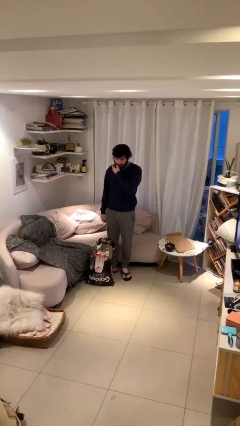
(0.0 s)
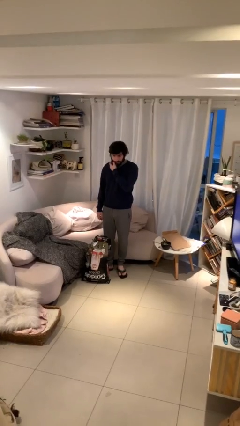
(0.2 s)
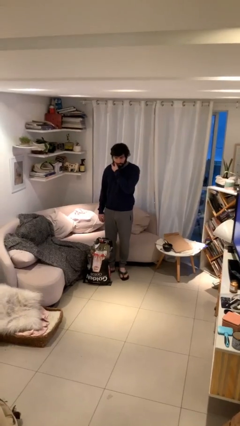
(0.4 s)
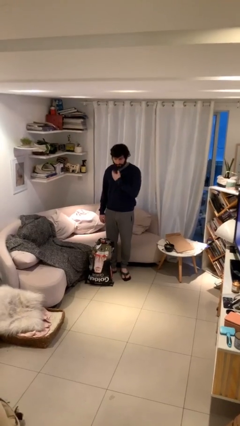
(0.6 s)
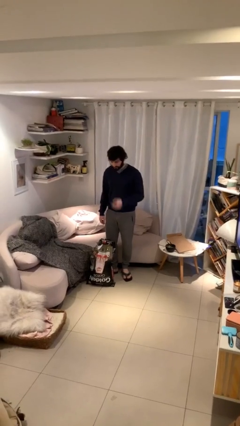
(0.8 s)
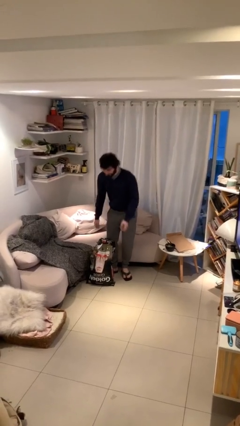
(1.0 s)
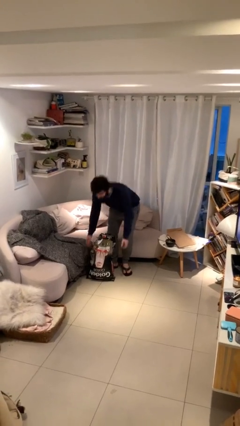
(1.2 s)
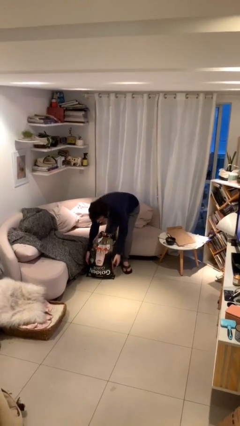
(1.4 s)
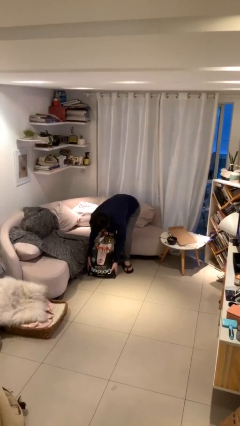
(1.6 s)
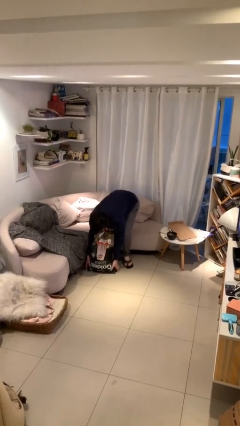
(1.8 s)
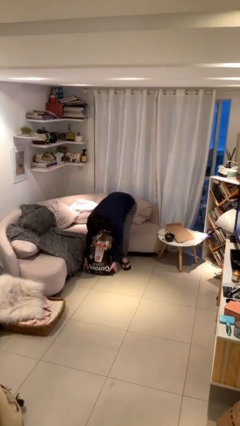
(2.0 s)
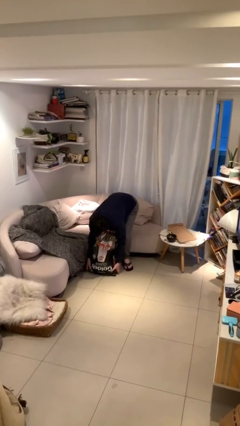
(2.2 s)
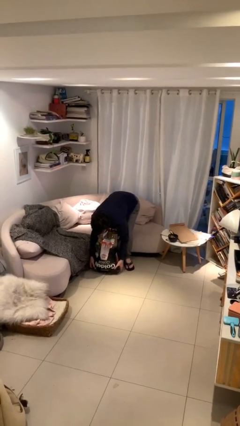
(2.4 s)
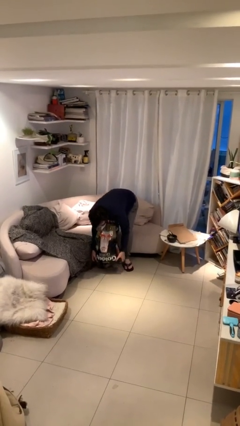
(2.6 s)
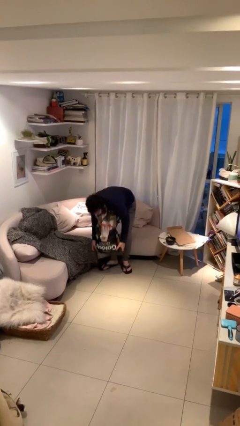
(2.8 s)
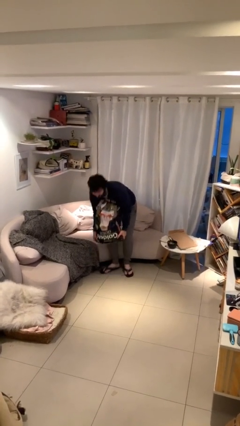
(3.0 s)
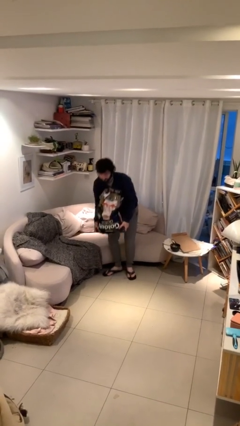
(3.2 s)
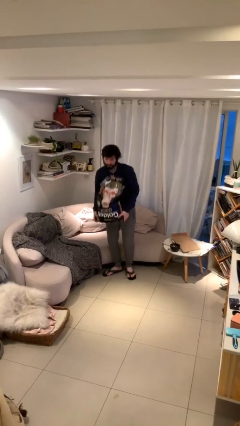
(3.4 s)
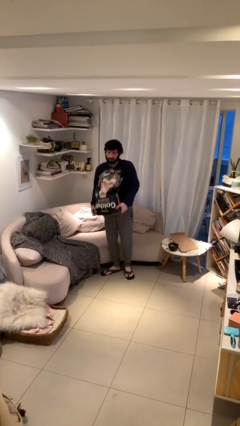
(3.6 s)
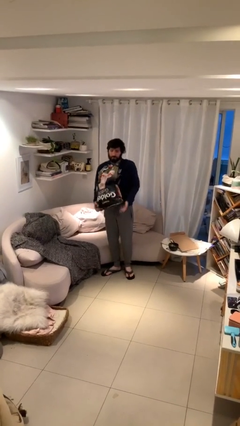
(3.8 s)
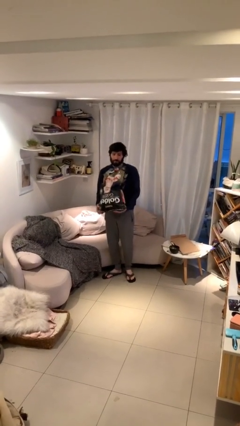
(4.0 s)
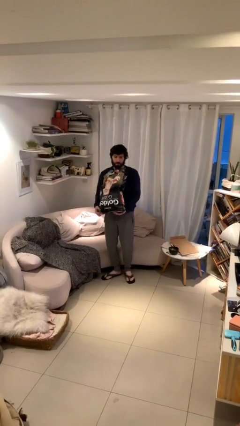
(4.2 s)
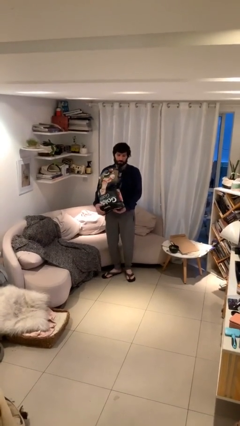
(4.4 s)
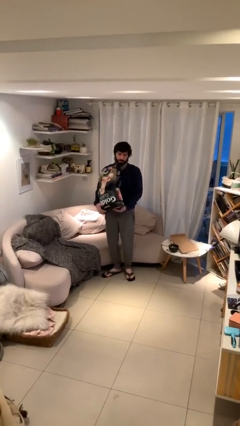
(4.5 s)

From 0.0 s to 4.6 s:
person picks up object from floor

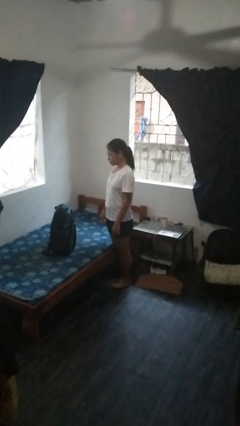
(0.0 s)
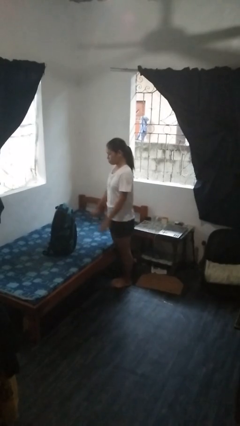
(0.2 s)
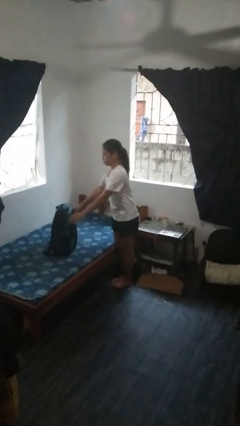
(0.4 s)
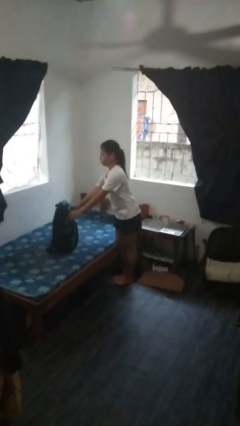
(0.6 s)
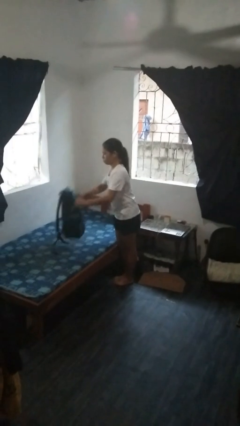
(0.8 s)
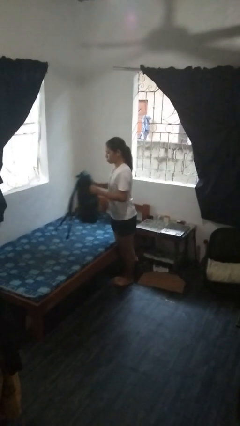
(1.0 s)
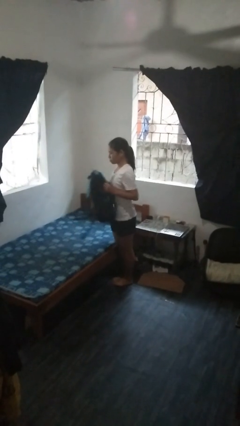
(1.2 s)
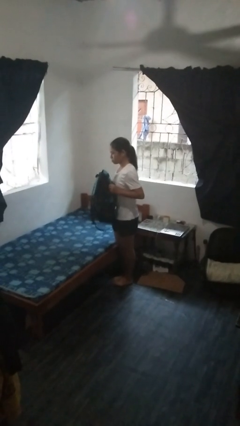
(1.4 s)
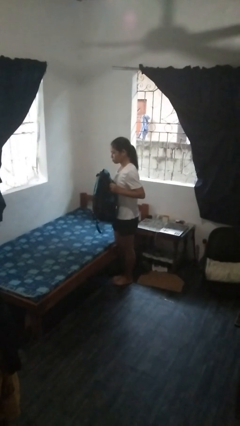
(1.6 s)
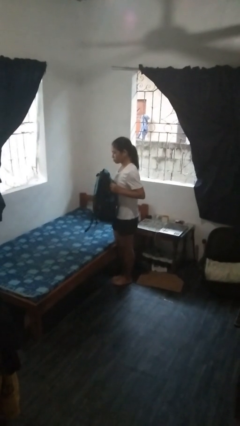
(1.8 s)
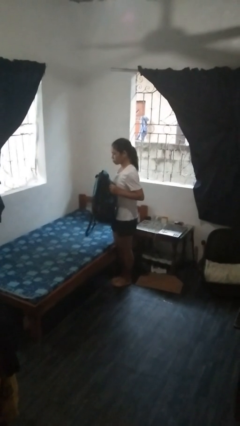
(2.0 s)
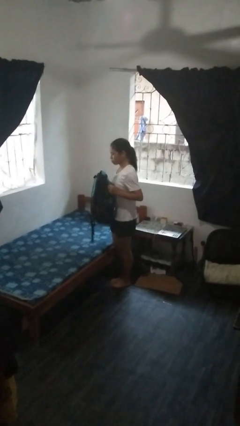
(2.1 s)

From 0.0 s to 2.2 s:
person picks up object from bed

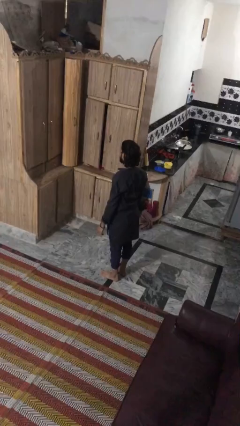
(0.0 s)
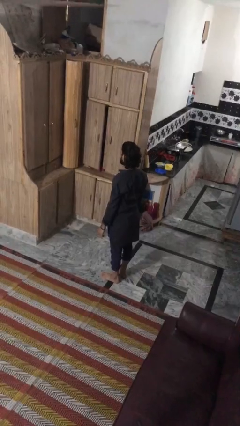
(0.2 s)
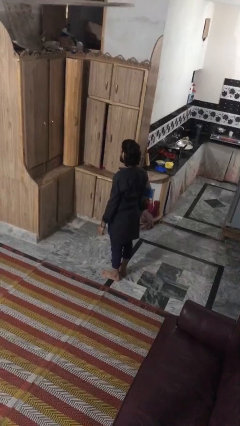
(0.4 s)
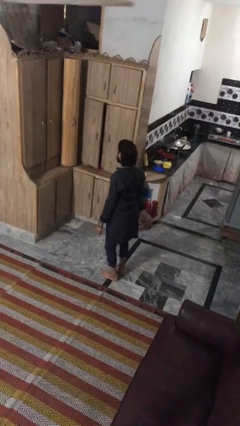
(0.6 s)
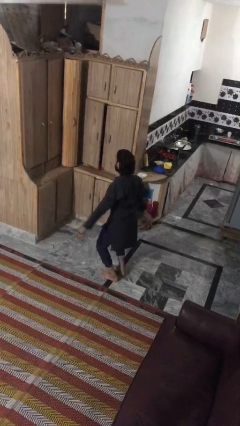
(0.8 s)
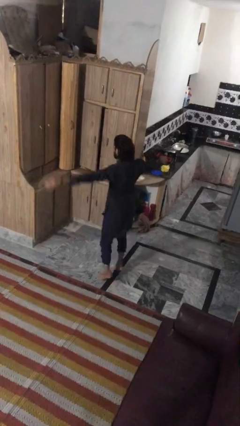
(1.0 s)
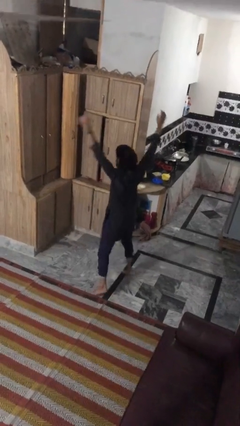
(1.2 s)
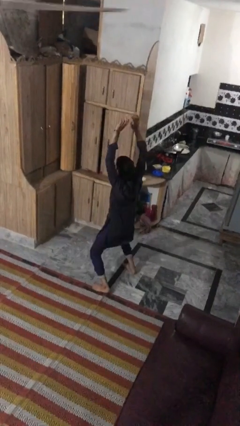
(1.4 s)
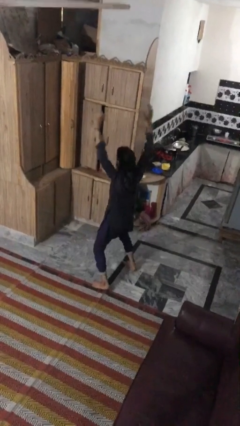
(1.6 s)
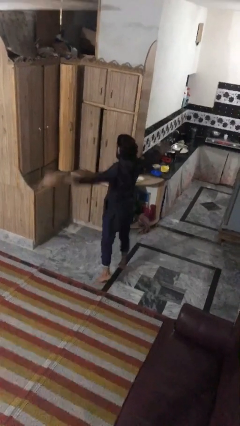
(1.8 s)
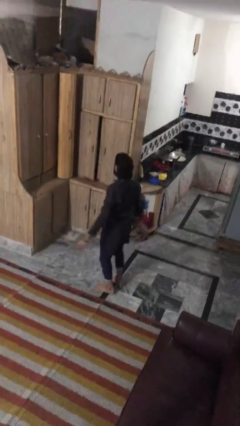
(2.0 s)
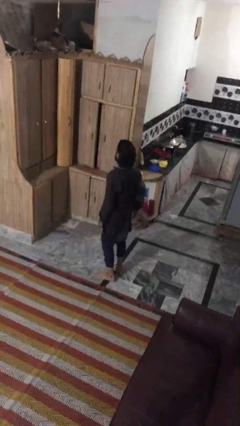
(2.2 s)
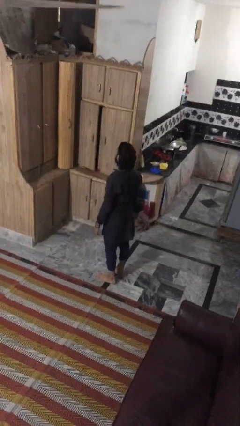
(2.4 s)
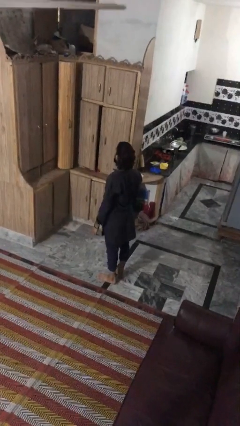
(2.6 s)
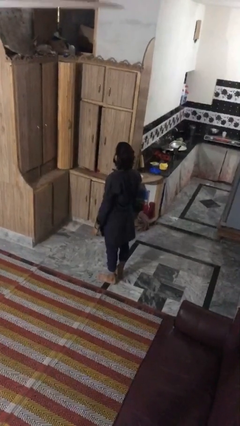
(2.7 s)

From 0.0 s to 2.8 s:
person exercises with jumping jacks

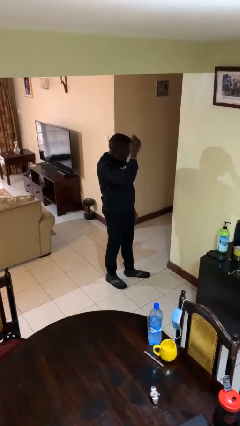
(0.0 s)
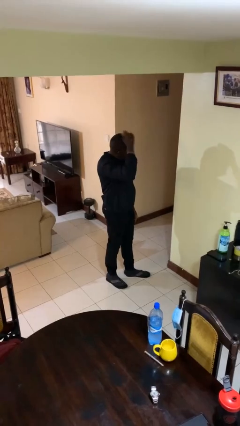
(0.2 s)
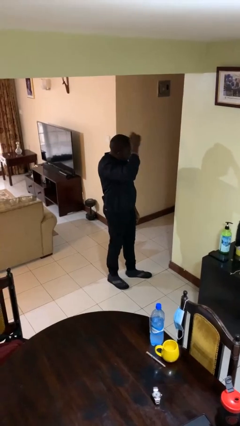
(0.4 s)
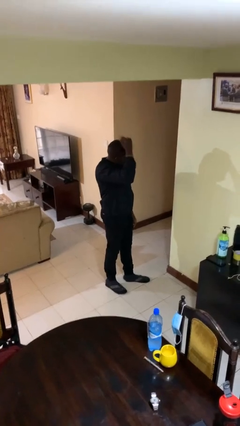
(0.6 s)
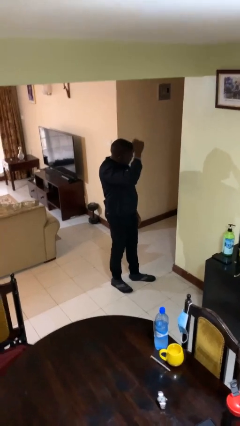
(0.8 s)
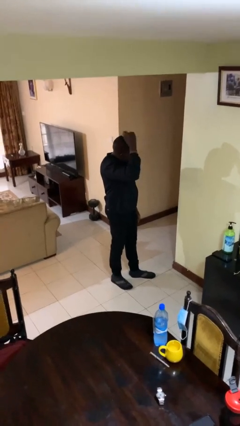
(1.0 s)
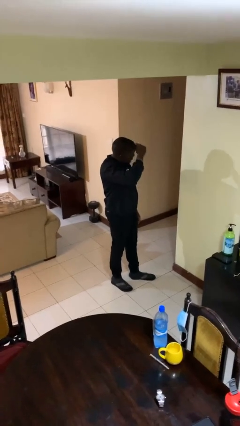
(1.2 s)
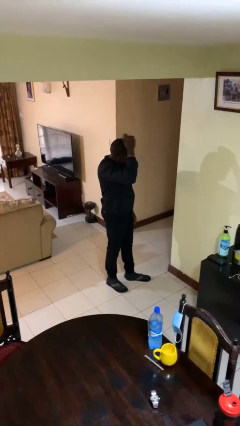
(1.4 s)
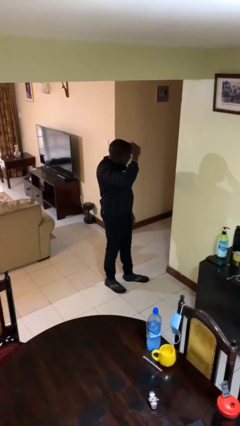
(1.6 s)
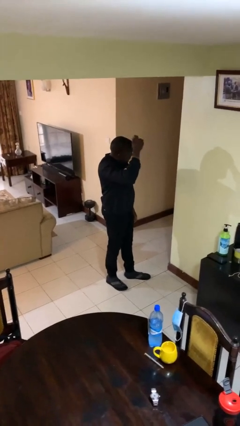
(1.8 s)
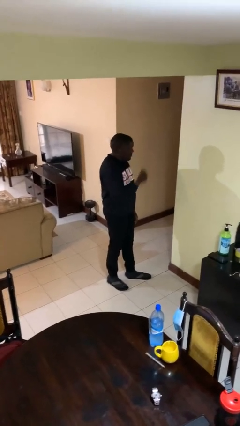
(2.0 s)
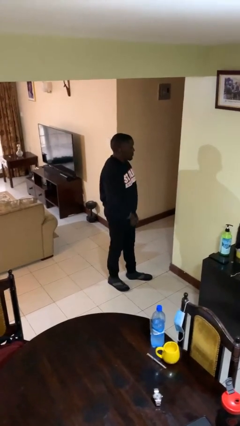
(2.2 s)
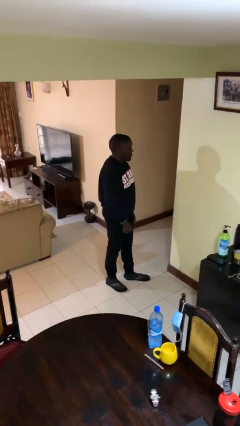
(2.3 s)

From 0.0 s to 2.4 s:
person brushes hair

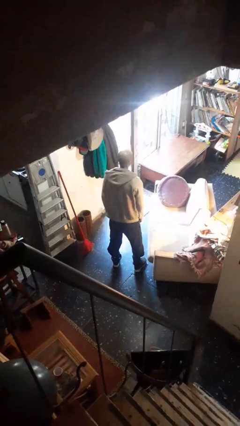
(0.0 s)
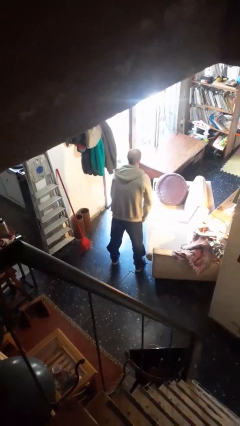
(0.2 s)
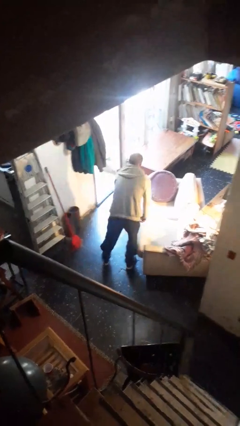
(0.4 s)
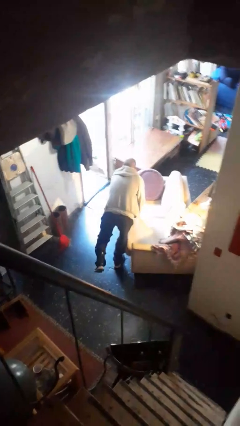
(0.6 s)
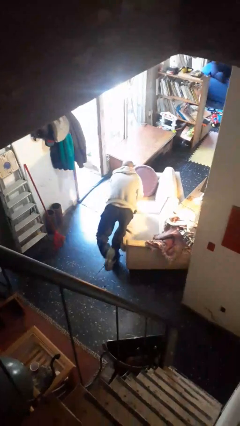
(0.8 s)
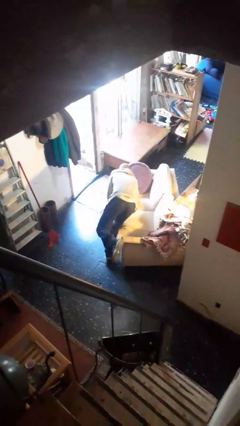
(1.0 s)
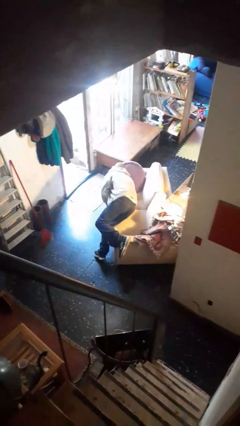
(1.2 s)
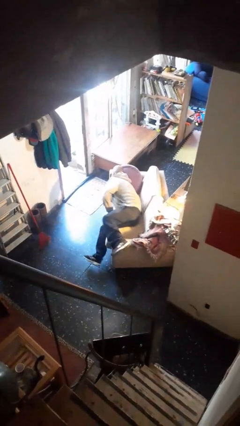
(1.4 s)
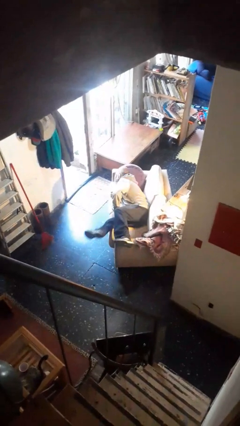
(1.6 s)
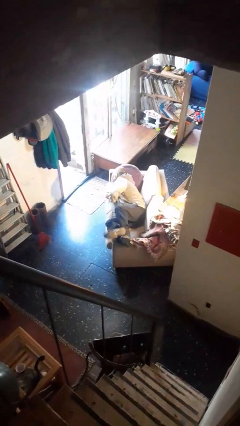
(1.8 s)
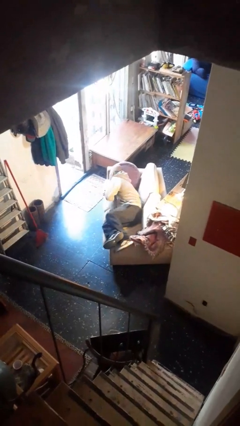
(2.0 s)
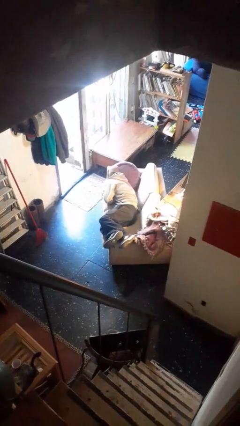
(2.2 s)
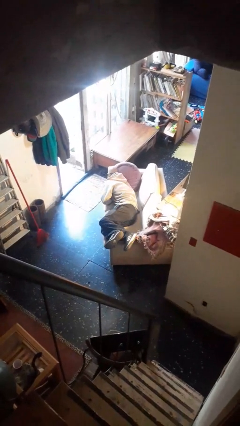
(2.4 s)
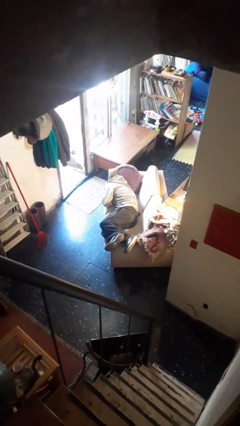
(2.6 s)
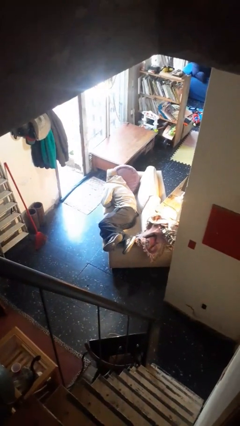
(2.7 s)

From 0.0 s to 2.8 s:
person lies down on couch

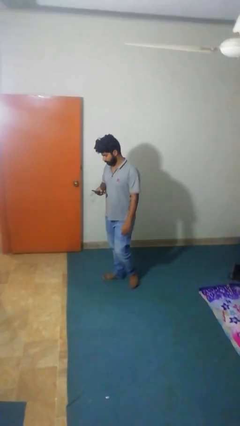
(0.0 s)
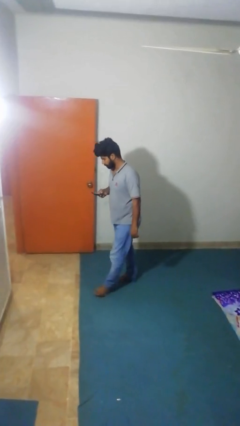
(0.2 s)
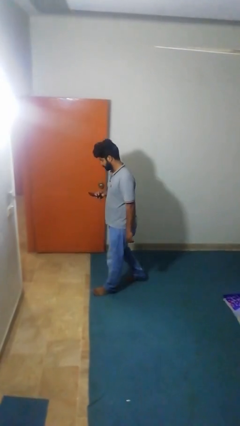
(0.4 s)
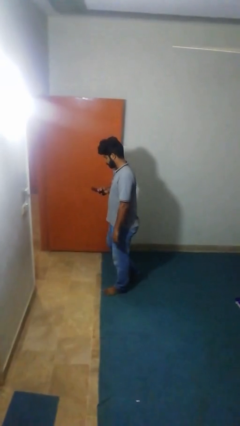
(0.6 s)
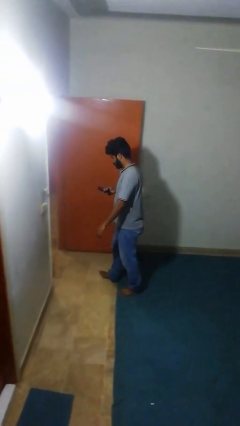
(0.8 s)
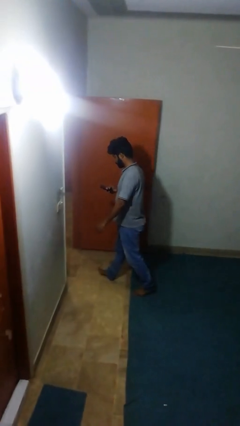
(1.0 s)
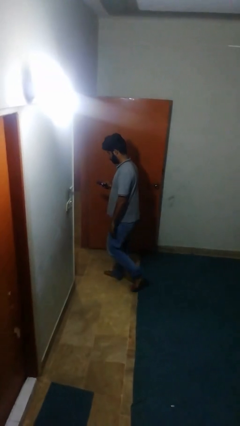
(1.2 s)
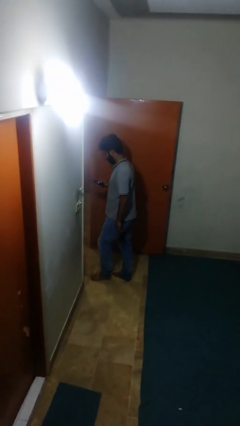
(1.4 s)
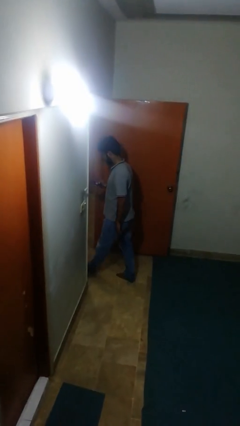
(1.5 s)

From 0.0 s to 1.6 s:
person exits scene through structure

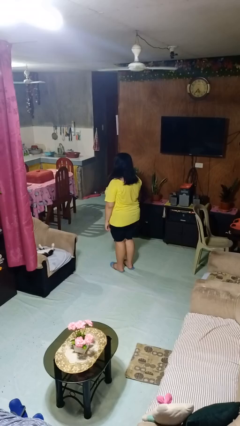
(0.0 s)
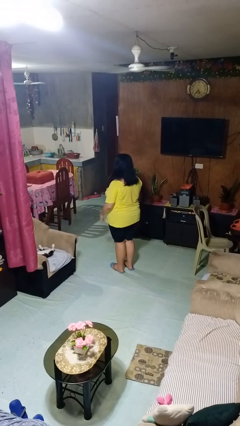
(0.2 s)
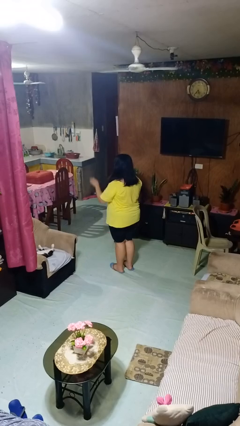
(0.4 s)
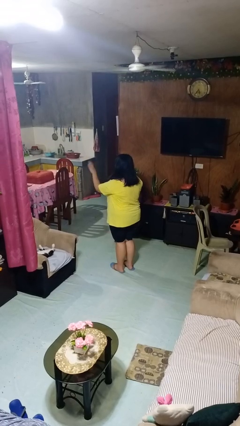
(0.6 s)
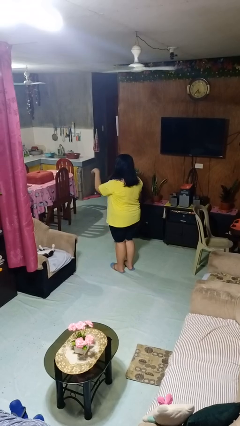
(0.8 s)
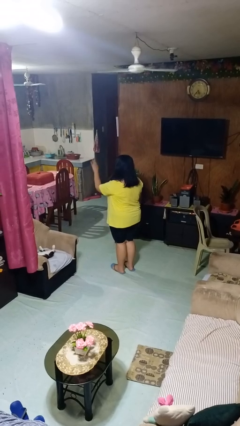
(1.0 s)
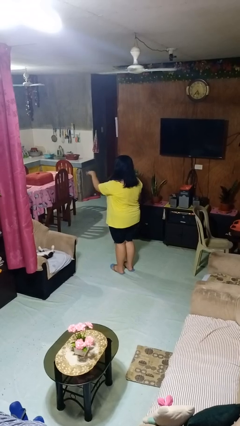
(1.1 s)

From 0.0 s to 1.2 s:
person gestures come here
